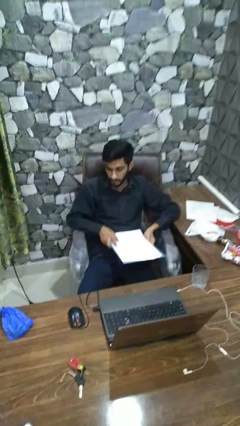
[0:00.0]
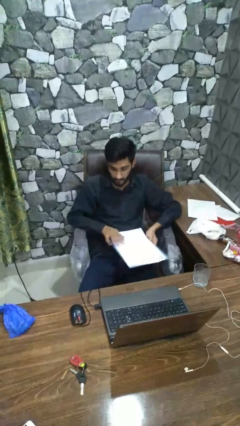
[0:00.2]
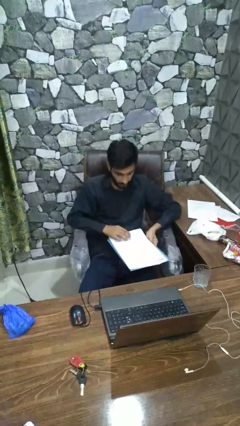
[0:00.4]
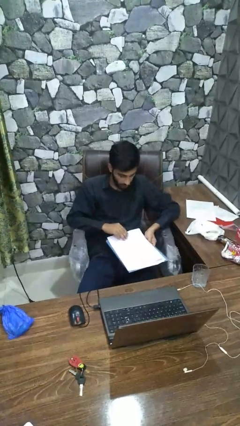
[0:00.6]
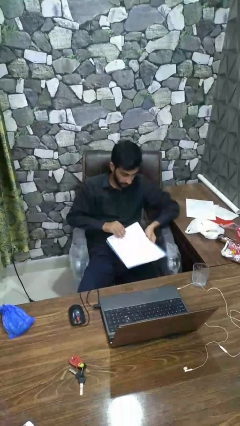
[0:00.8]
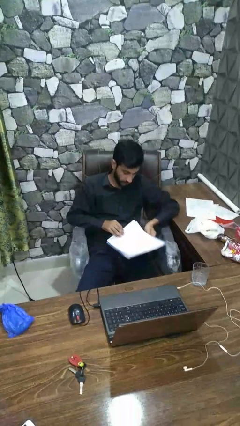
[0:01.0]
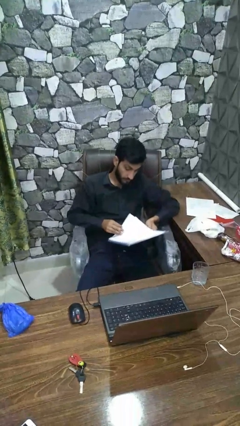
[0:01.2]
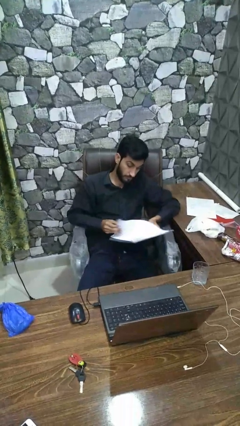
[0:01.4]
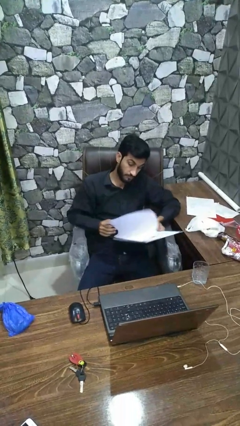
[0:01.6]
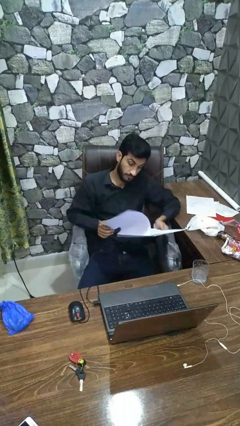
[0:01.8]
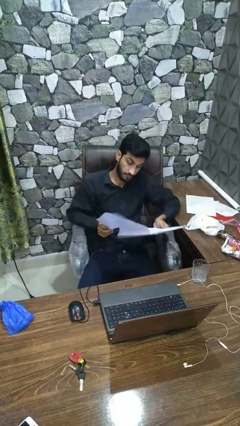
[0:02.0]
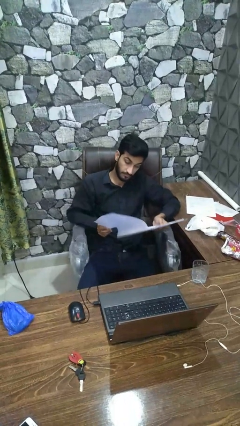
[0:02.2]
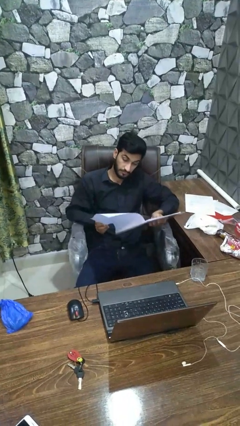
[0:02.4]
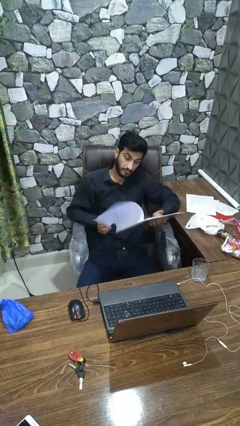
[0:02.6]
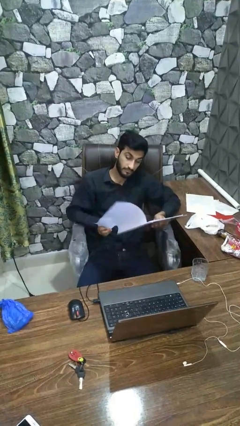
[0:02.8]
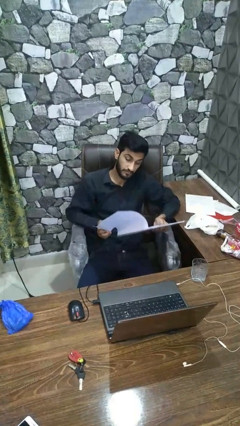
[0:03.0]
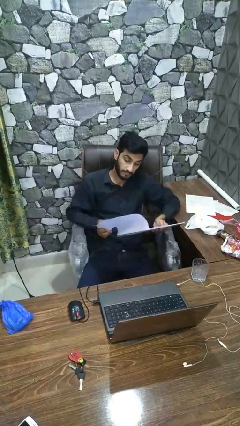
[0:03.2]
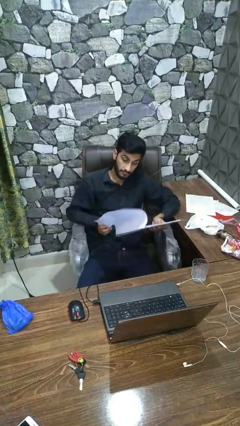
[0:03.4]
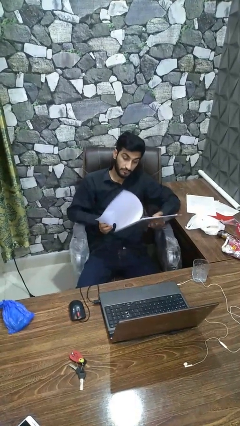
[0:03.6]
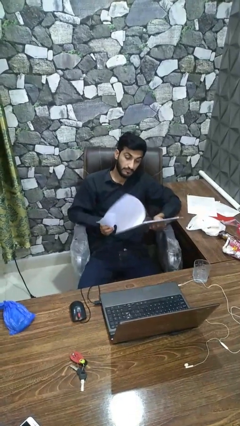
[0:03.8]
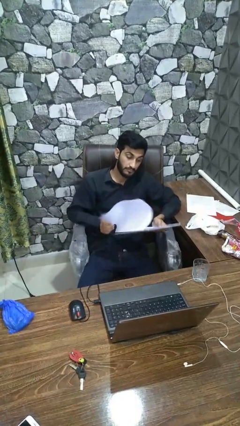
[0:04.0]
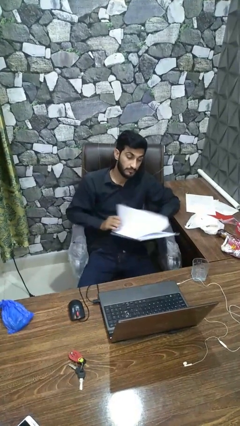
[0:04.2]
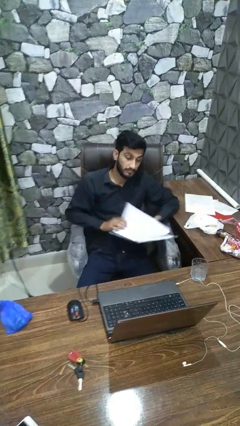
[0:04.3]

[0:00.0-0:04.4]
person reads book

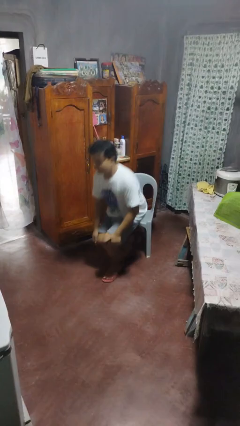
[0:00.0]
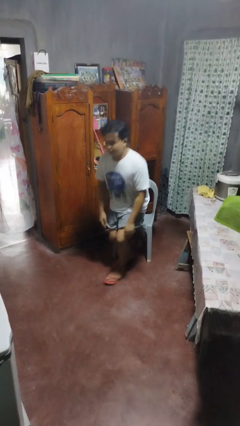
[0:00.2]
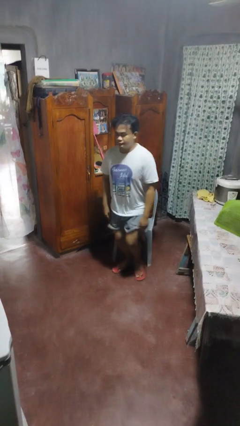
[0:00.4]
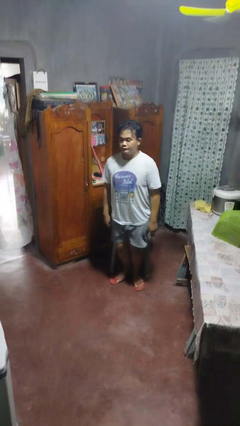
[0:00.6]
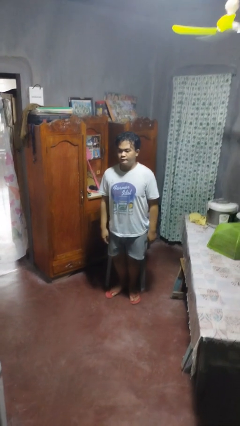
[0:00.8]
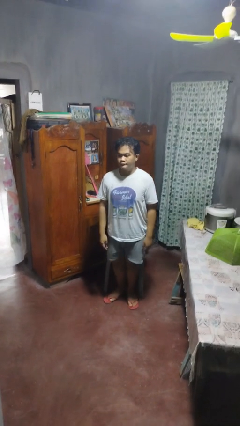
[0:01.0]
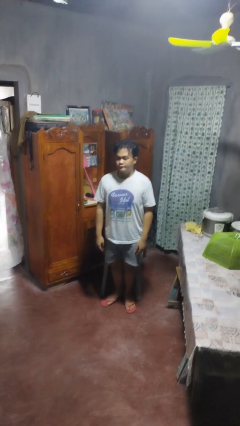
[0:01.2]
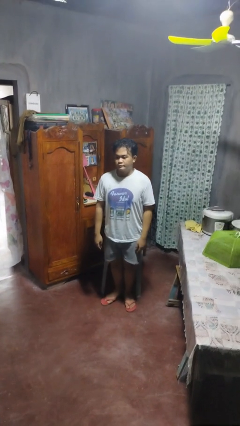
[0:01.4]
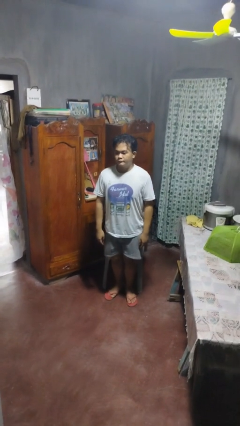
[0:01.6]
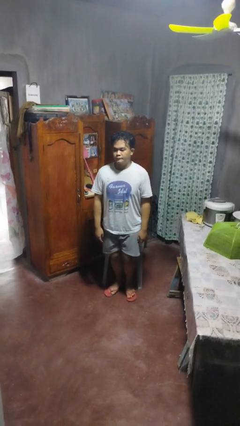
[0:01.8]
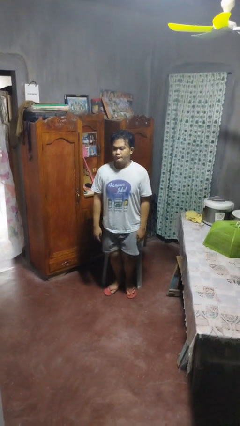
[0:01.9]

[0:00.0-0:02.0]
person stands up from floor

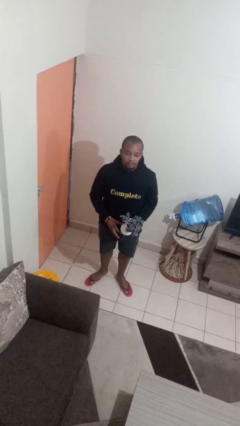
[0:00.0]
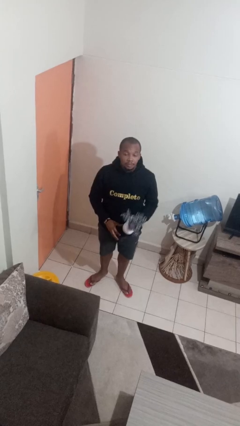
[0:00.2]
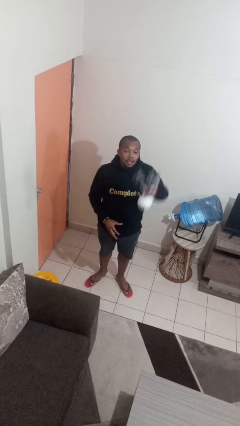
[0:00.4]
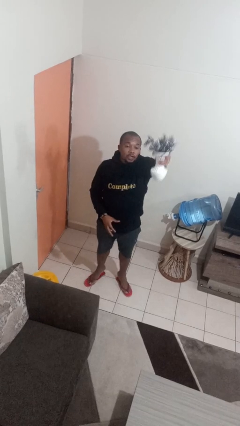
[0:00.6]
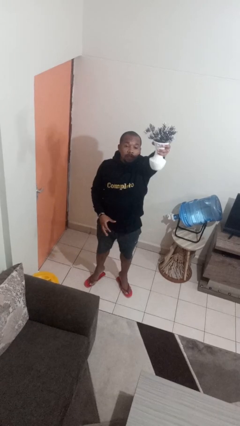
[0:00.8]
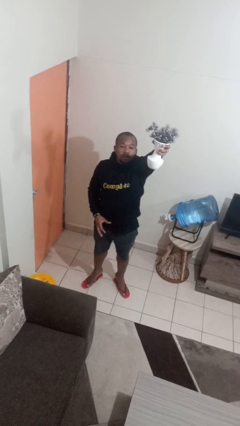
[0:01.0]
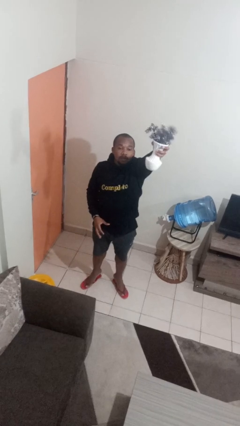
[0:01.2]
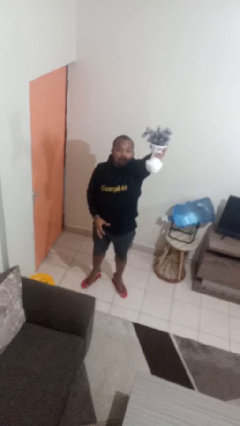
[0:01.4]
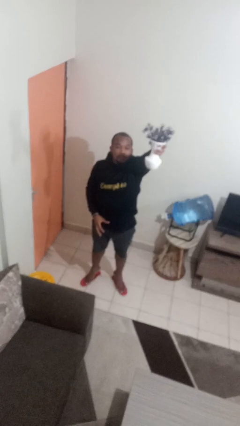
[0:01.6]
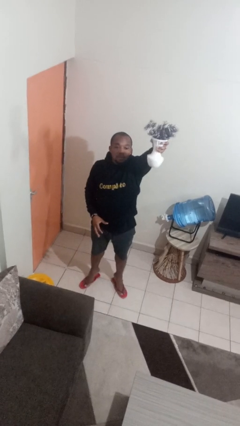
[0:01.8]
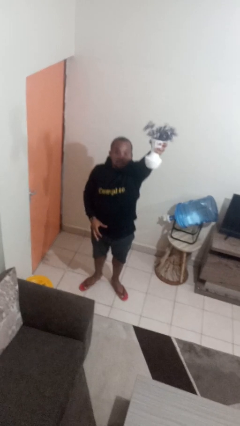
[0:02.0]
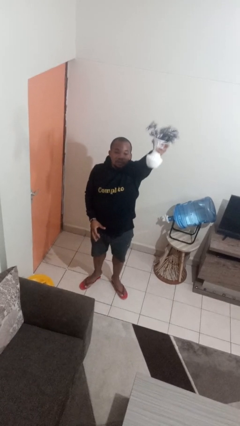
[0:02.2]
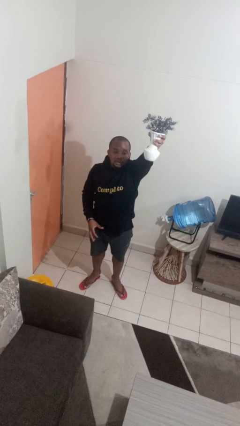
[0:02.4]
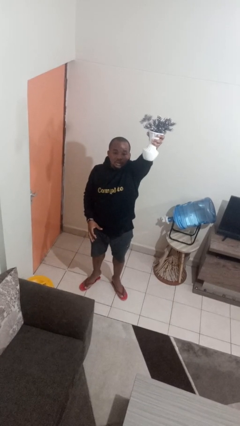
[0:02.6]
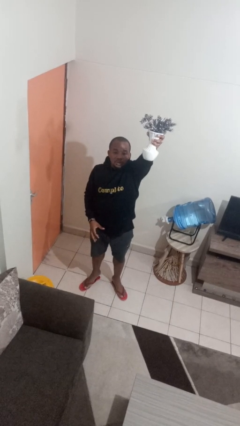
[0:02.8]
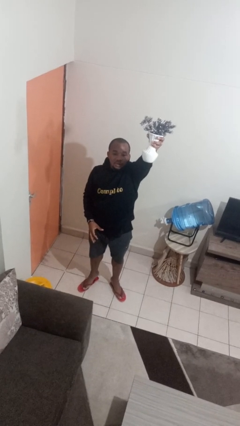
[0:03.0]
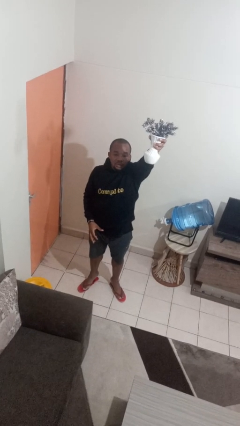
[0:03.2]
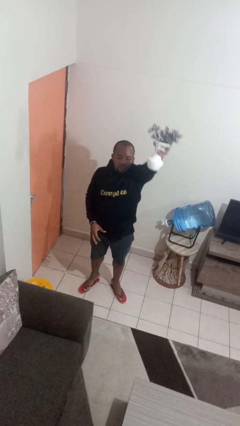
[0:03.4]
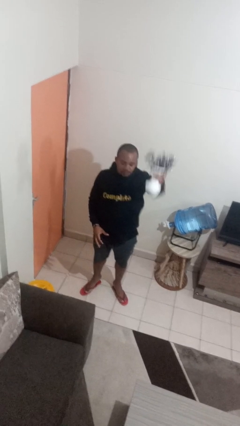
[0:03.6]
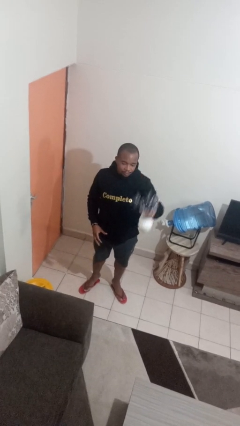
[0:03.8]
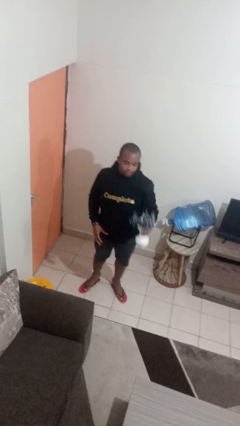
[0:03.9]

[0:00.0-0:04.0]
person holds object above head

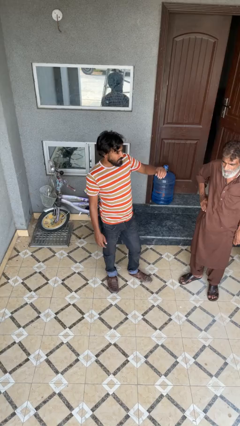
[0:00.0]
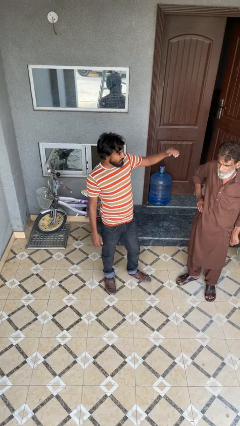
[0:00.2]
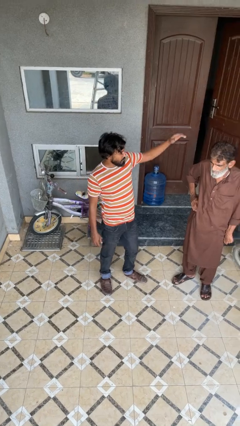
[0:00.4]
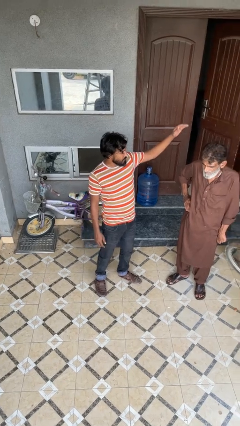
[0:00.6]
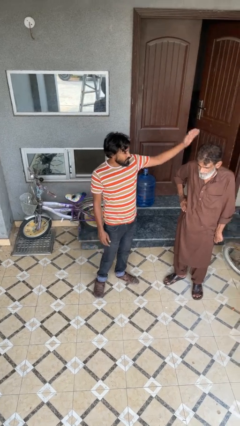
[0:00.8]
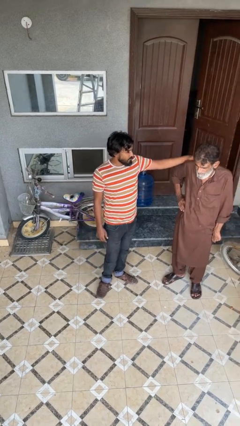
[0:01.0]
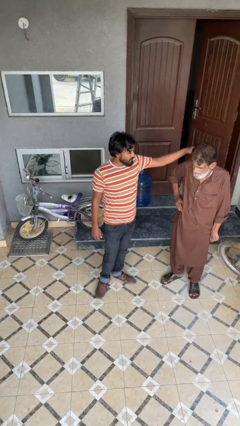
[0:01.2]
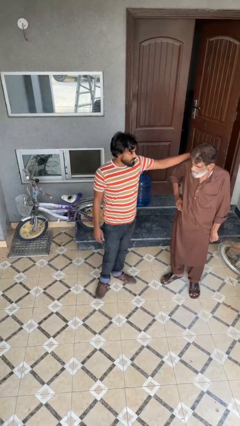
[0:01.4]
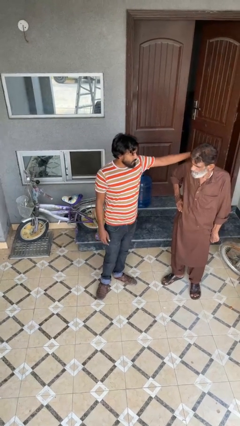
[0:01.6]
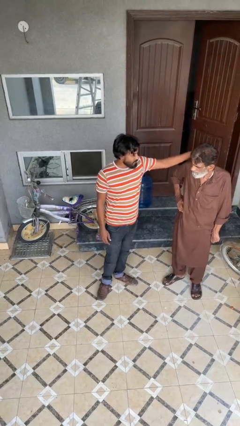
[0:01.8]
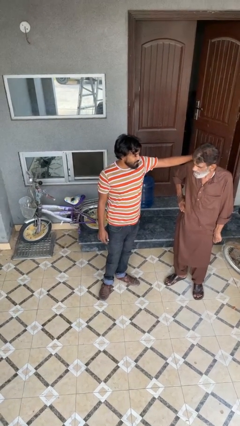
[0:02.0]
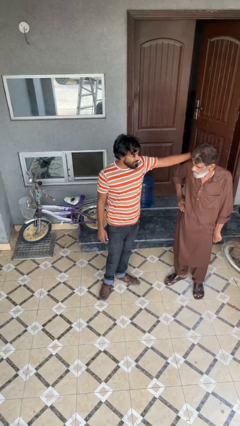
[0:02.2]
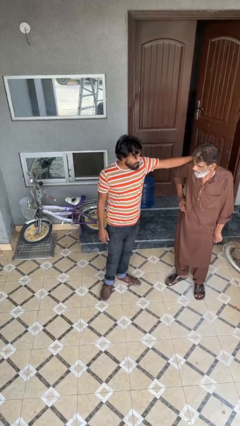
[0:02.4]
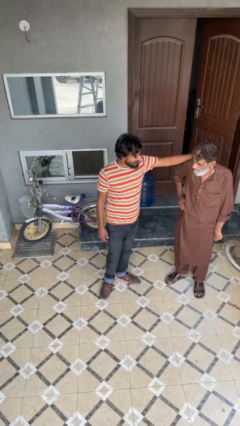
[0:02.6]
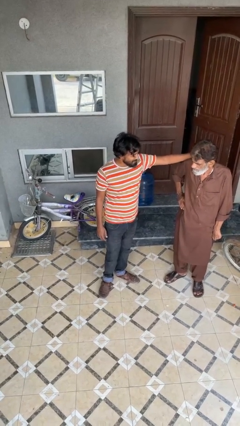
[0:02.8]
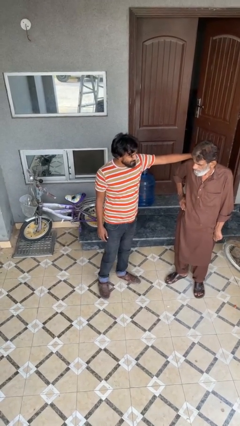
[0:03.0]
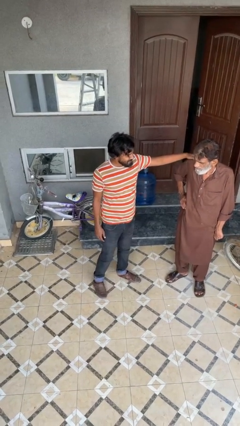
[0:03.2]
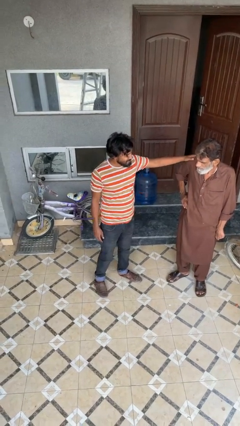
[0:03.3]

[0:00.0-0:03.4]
person pounds shoulders of person

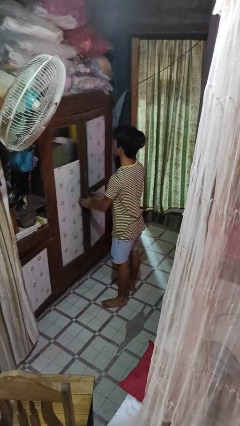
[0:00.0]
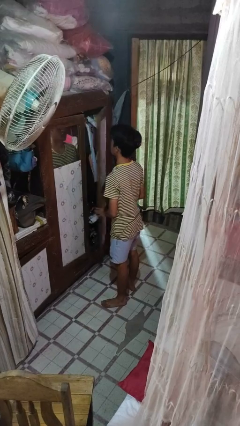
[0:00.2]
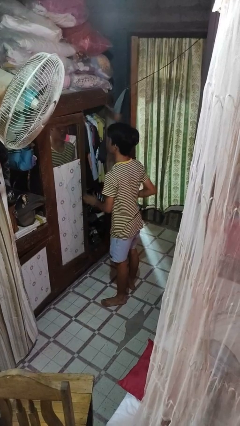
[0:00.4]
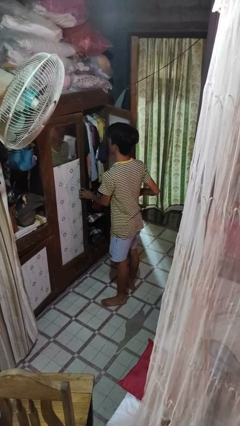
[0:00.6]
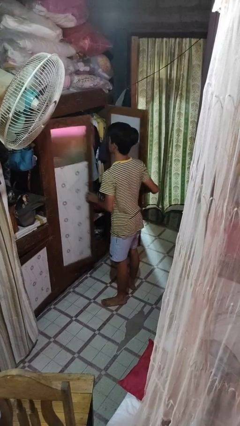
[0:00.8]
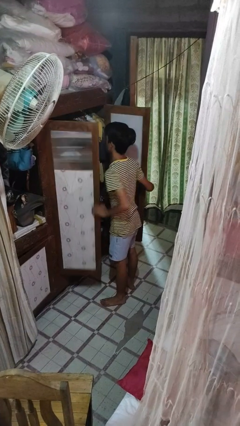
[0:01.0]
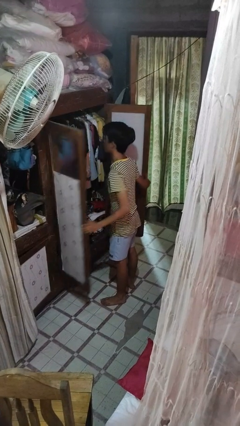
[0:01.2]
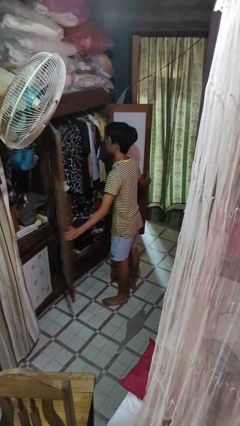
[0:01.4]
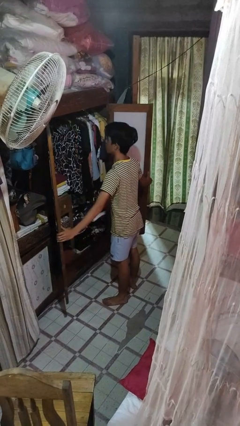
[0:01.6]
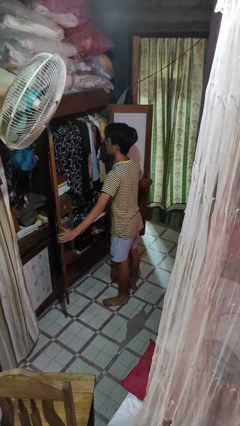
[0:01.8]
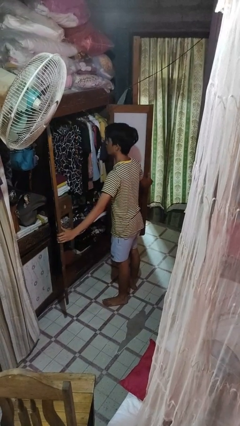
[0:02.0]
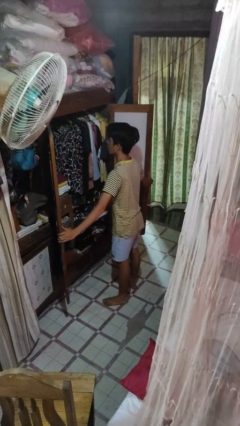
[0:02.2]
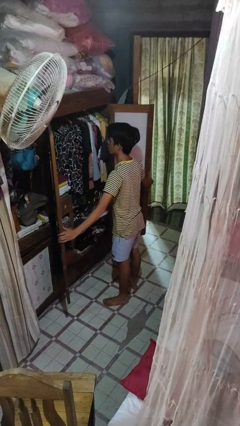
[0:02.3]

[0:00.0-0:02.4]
person opens closet door

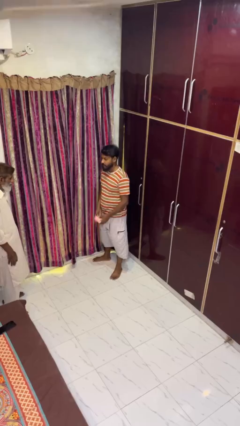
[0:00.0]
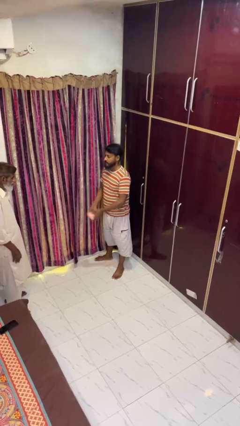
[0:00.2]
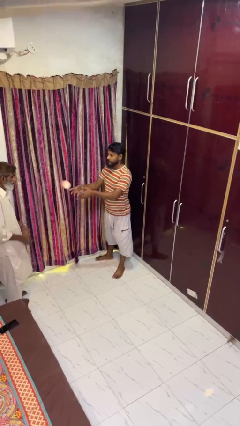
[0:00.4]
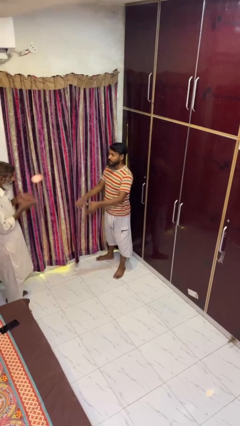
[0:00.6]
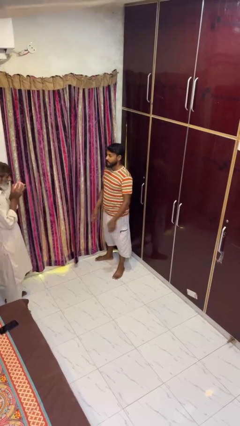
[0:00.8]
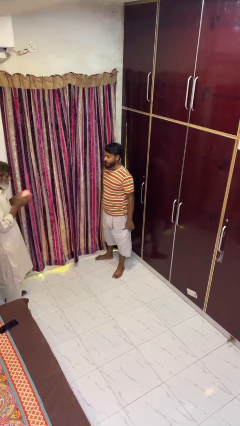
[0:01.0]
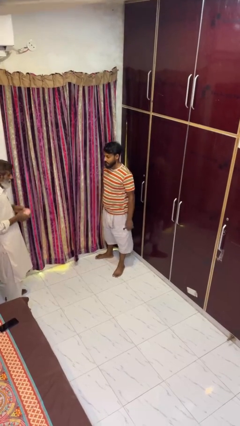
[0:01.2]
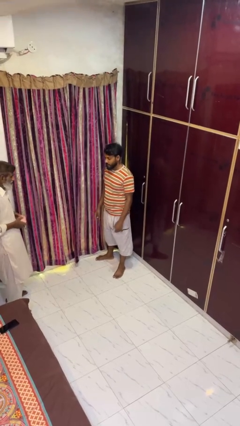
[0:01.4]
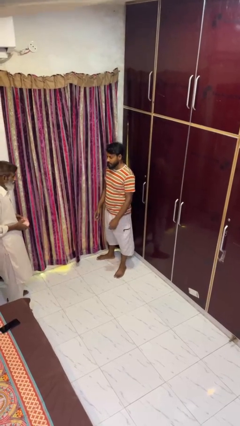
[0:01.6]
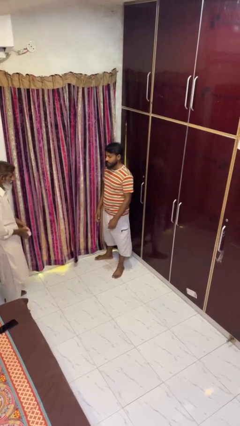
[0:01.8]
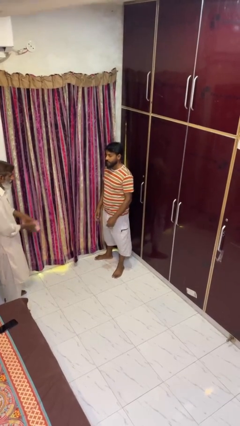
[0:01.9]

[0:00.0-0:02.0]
person throws object to person
